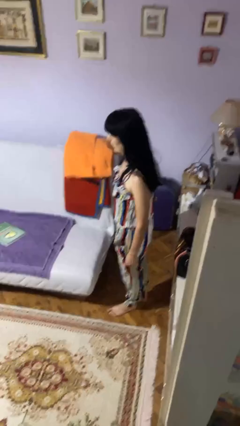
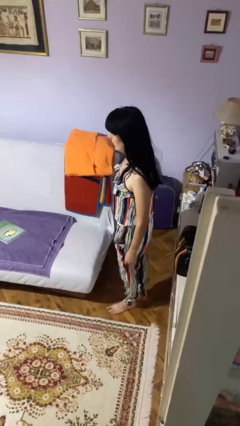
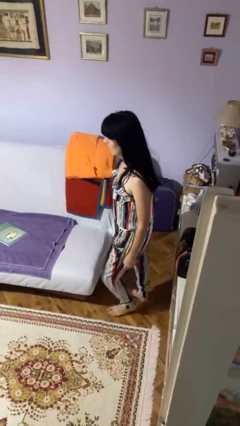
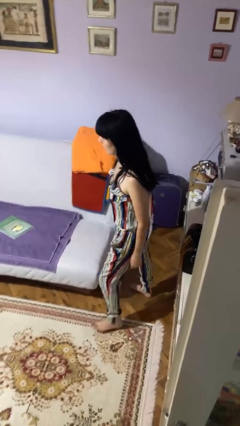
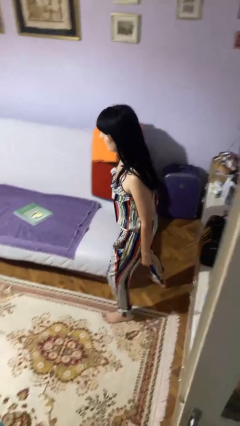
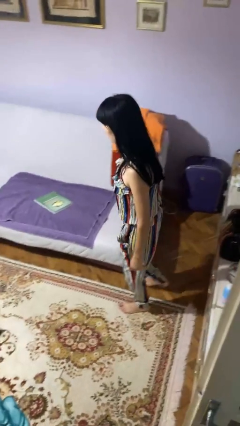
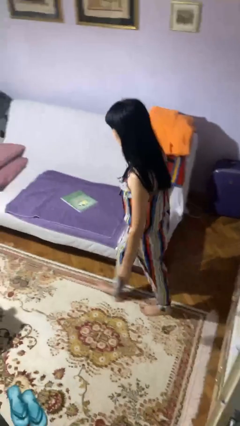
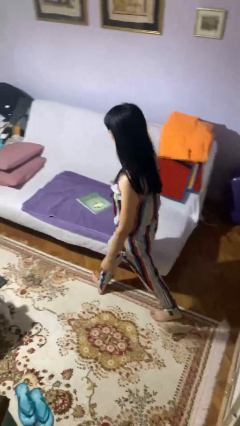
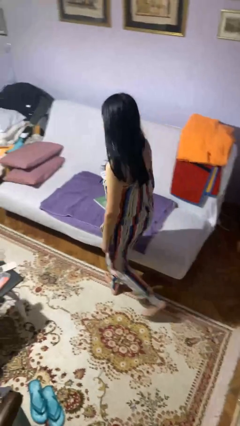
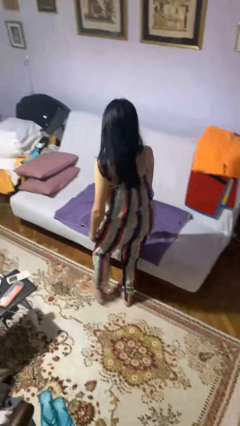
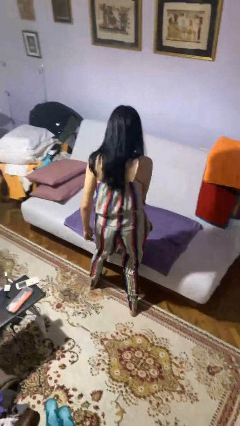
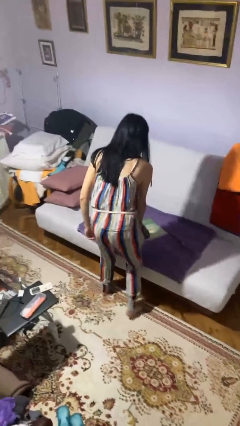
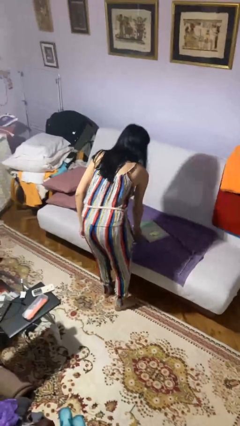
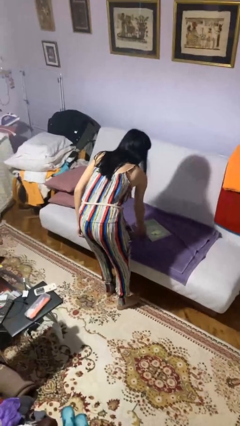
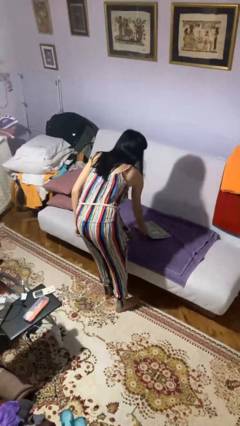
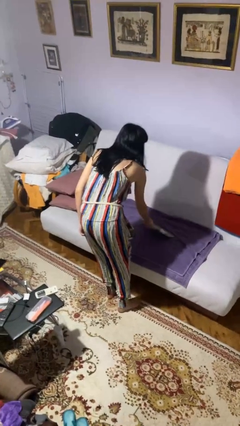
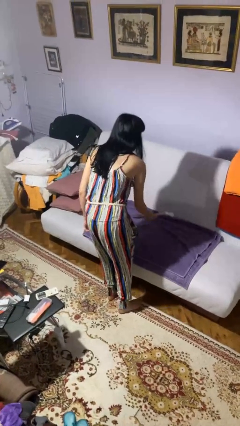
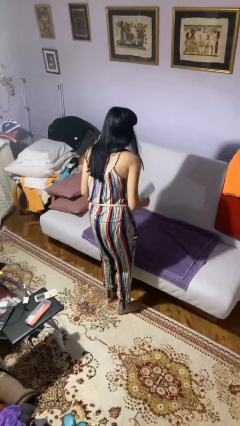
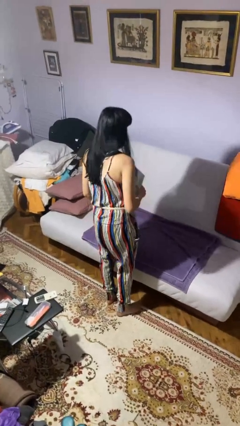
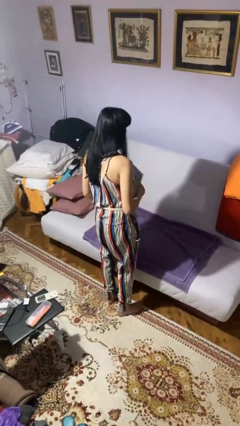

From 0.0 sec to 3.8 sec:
person picks up object from bed

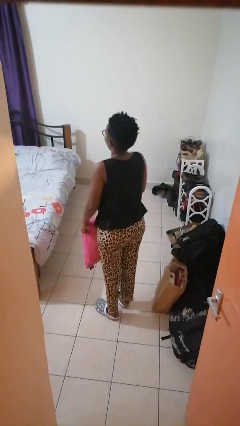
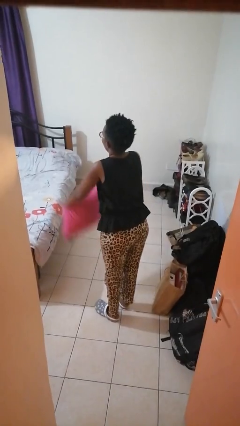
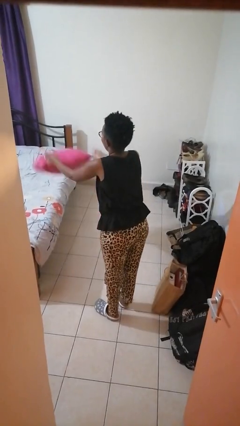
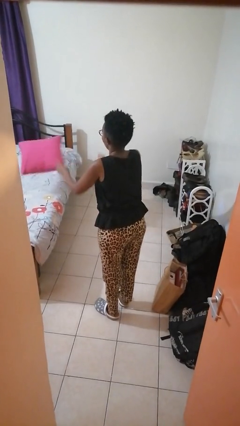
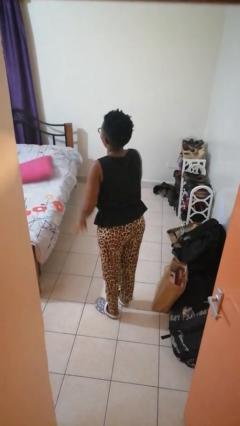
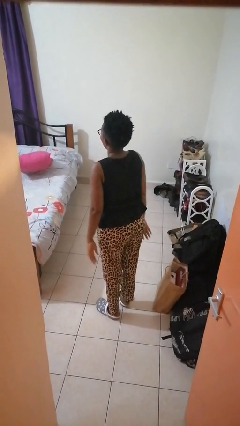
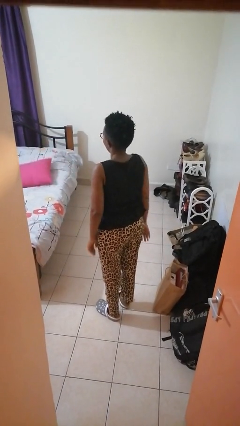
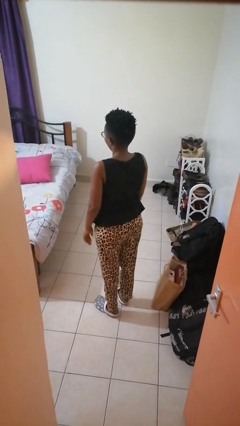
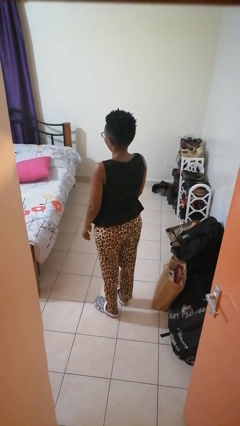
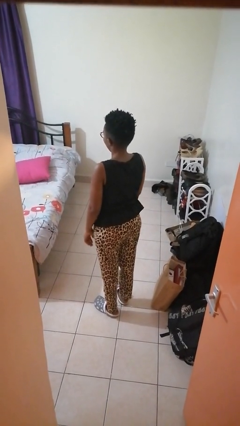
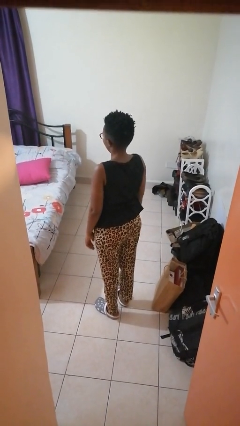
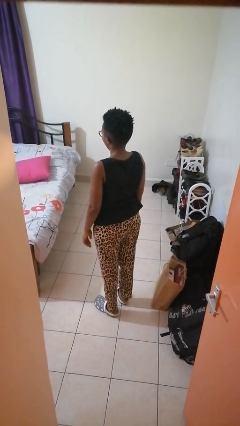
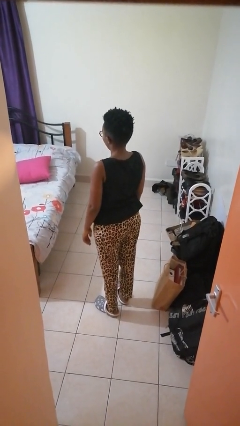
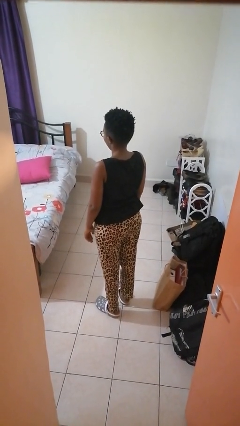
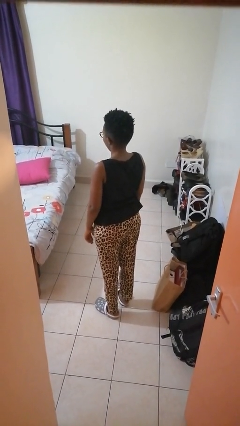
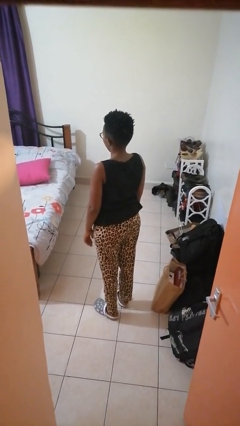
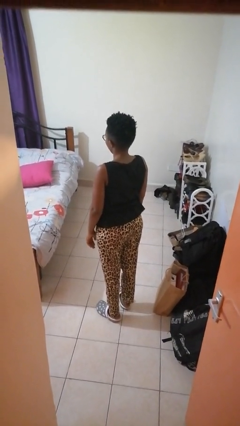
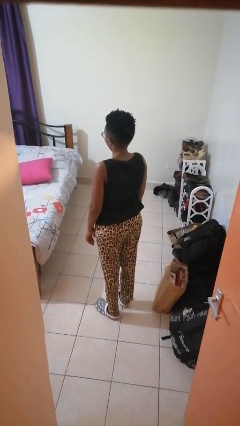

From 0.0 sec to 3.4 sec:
person throws object on bed

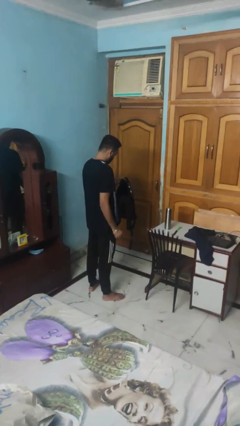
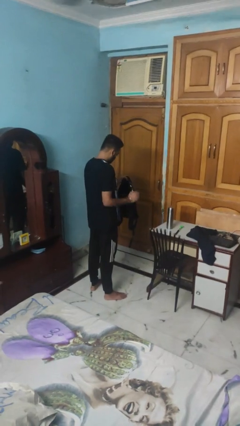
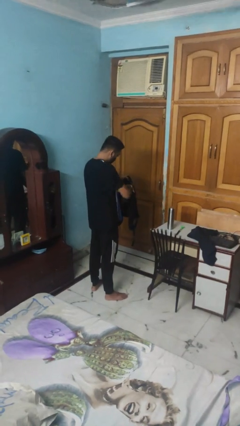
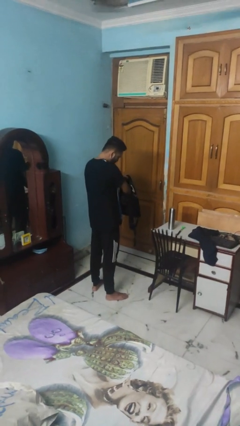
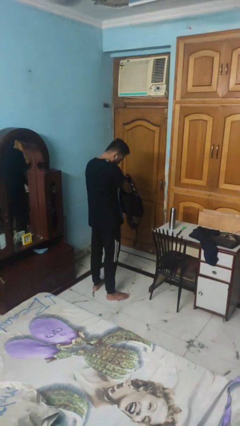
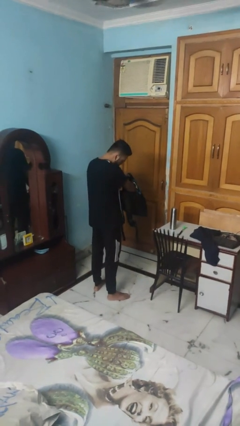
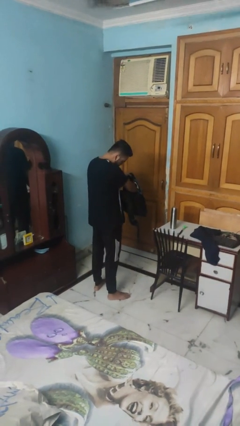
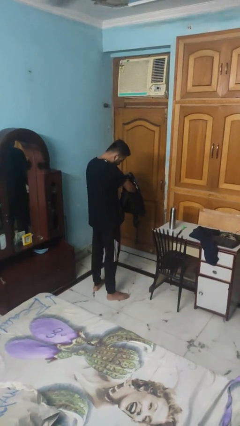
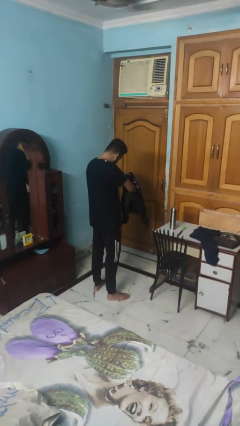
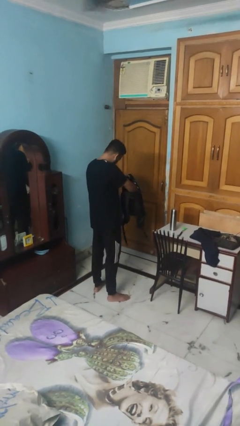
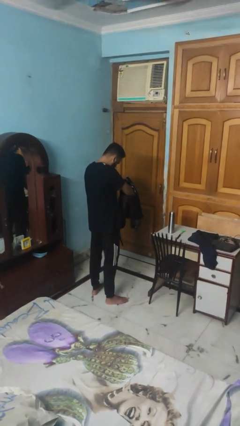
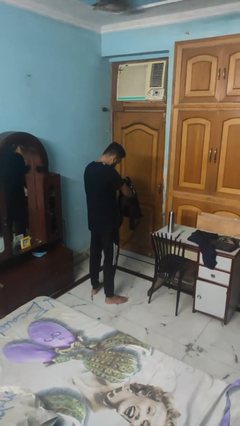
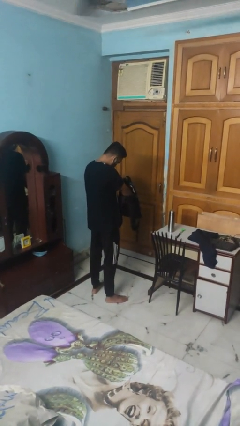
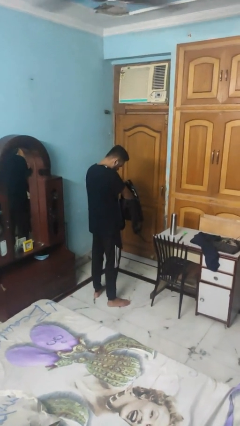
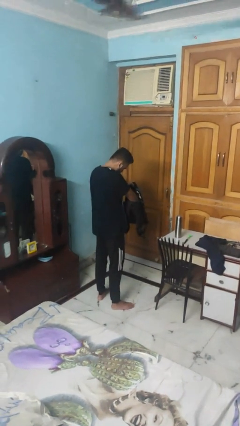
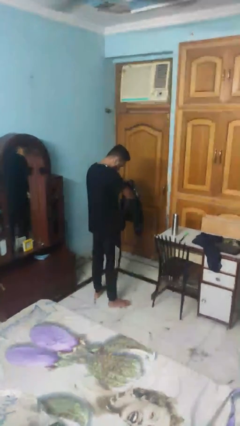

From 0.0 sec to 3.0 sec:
person searches in backpack

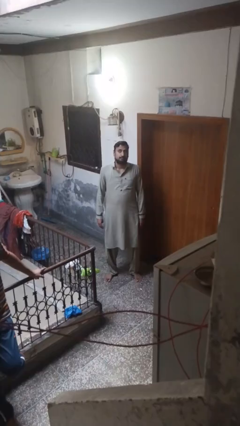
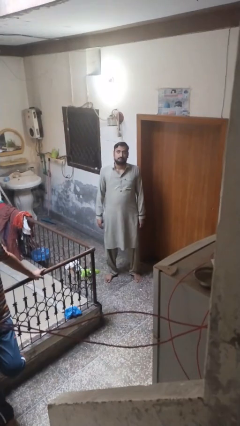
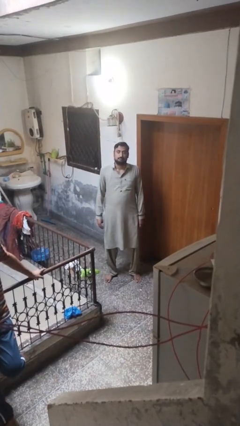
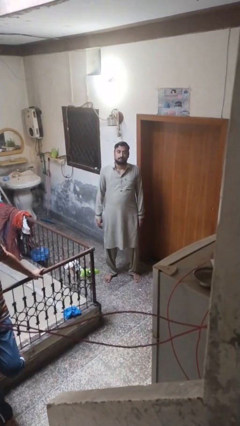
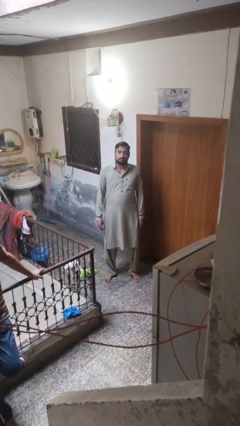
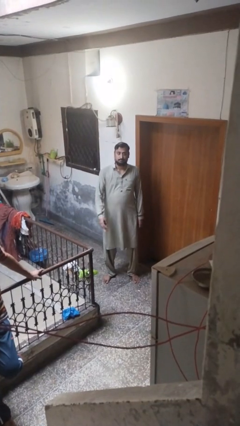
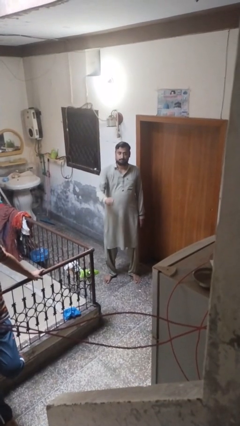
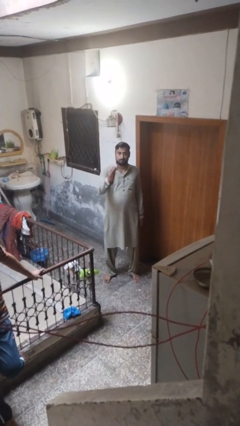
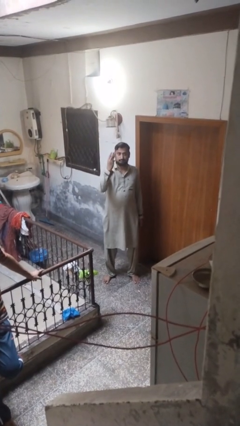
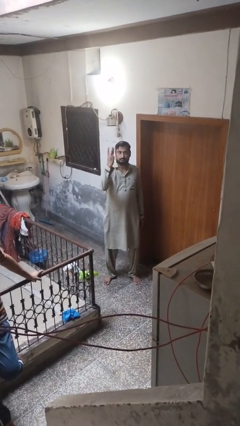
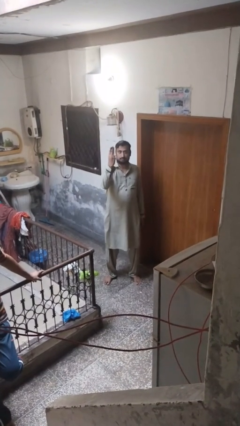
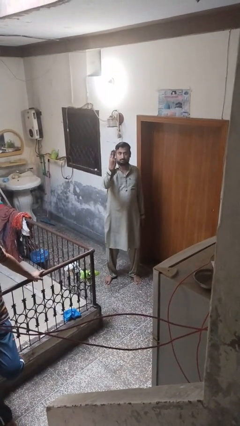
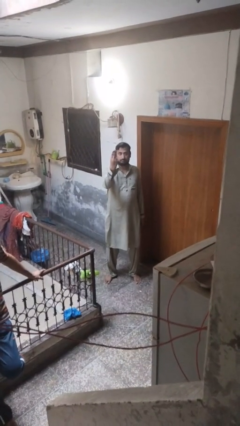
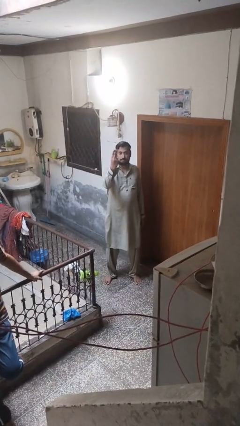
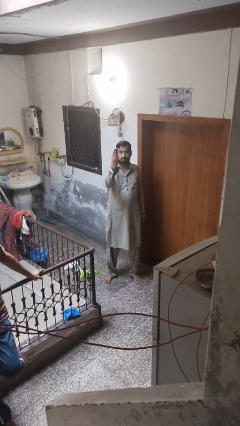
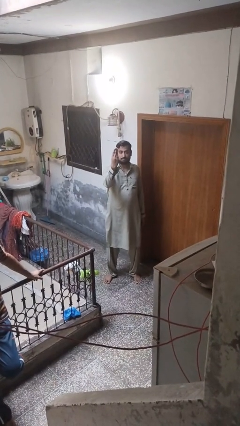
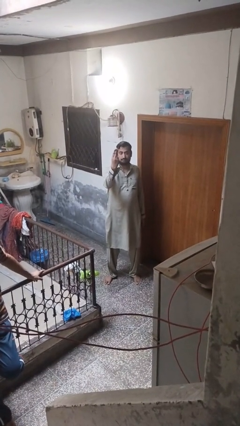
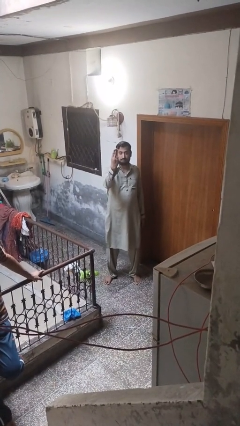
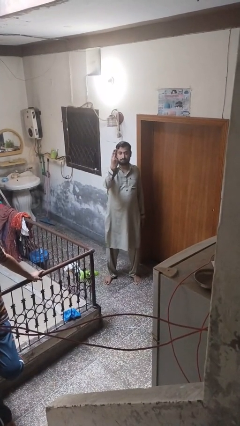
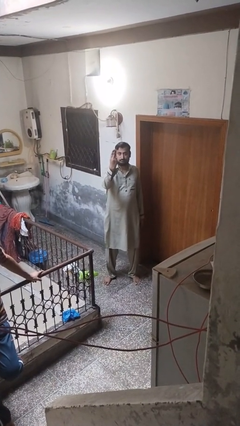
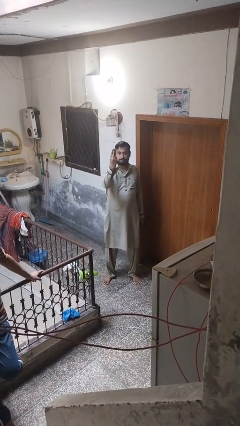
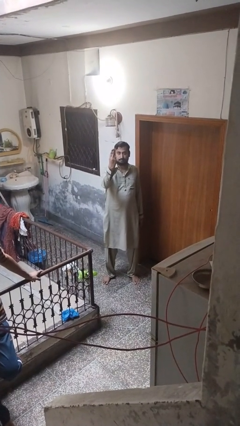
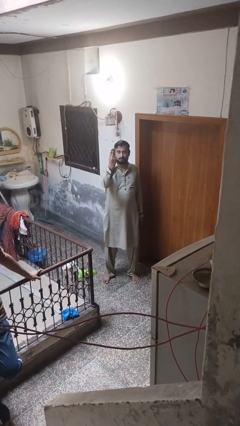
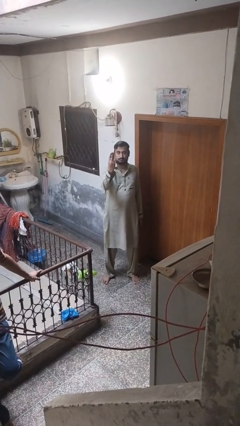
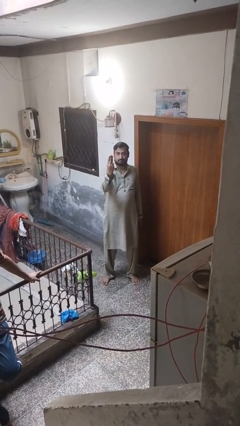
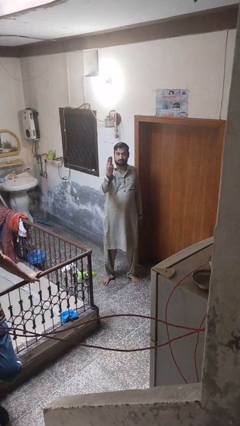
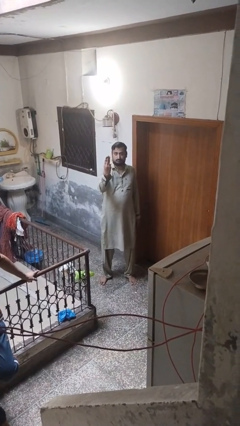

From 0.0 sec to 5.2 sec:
person gestures number three

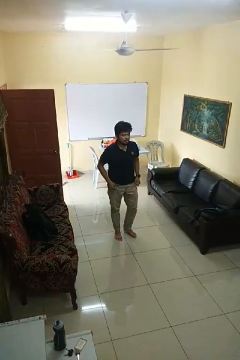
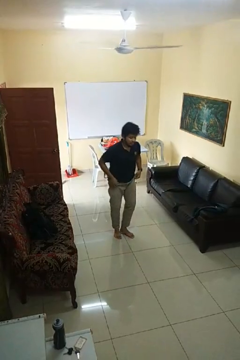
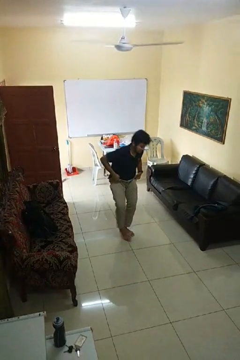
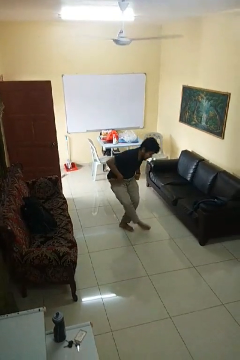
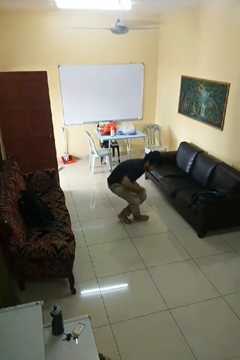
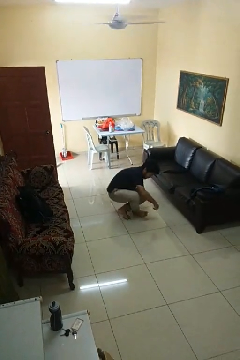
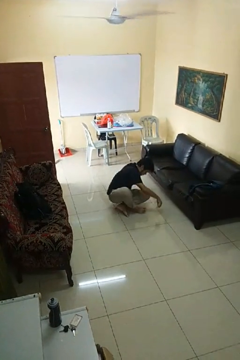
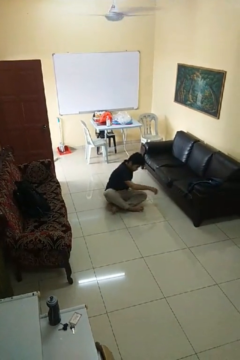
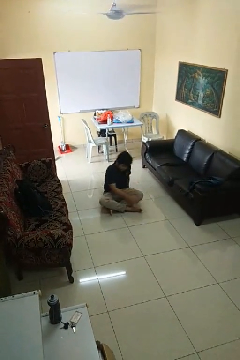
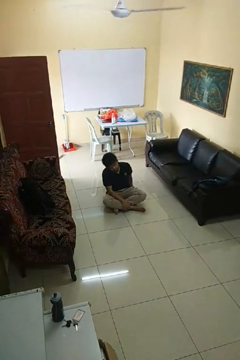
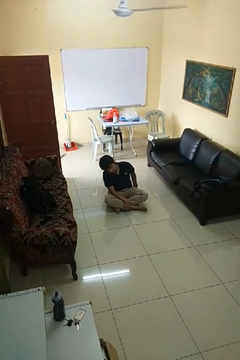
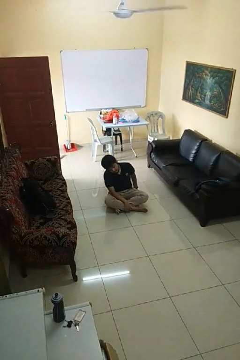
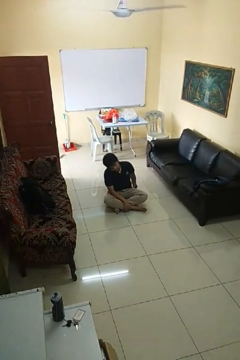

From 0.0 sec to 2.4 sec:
person sits crisscross

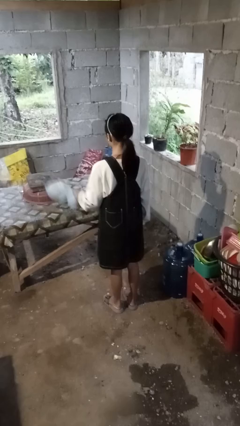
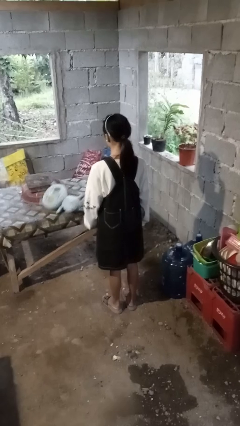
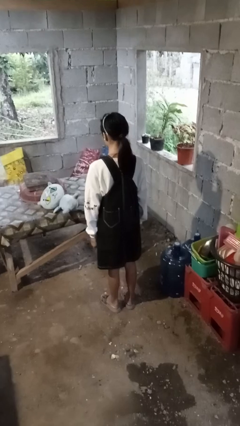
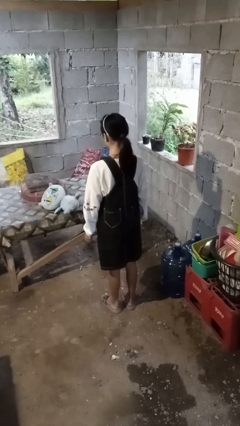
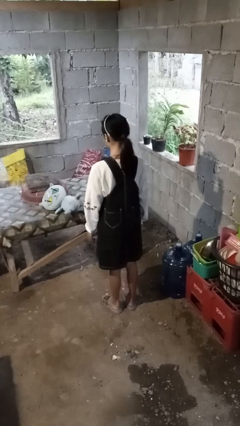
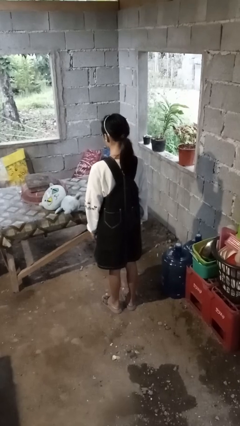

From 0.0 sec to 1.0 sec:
person throws object on table
